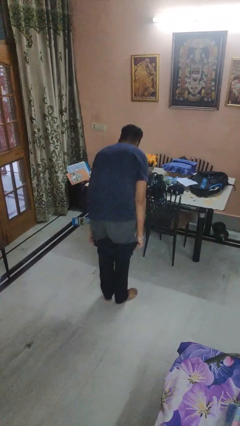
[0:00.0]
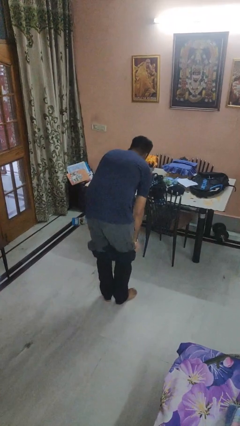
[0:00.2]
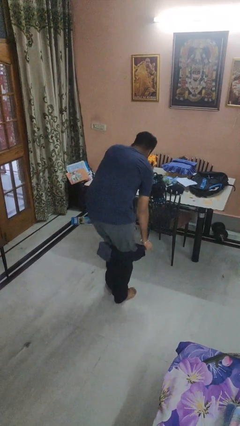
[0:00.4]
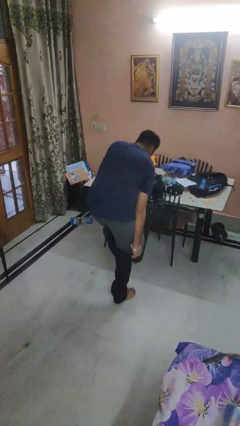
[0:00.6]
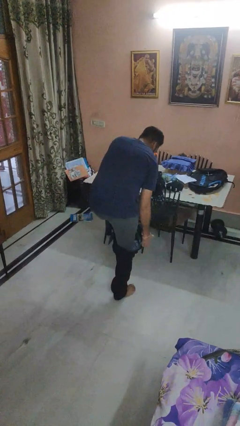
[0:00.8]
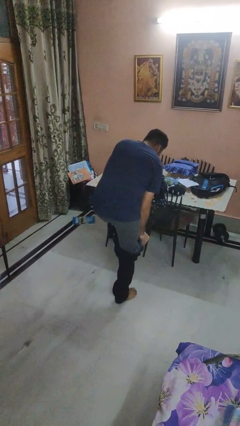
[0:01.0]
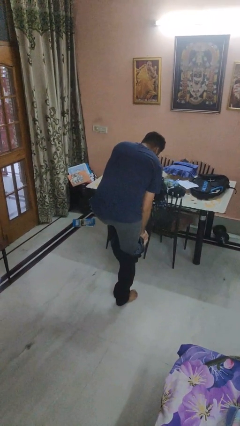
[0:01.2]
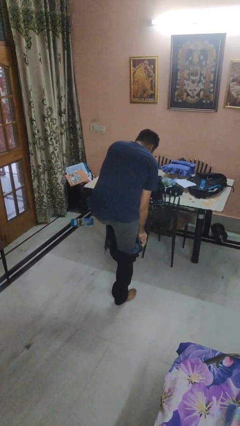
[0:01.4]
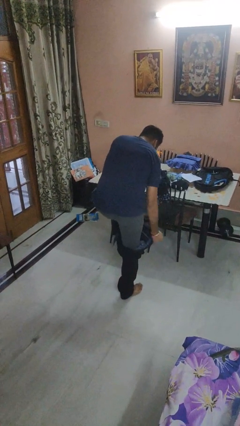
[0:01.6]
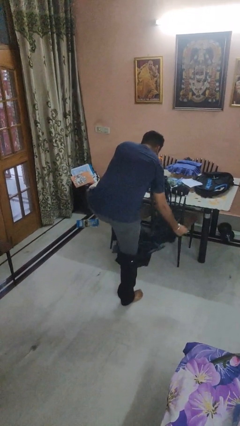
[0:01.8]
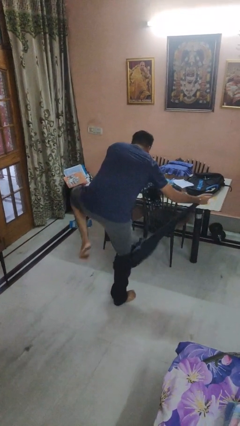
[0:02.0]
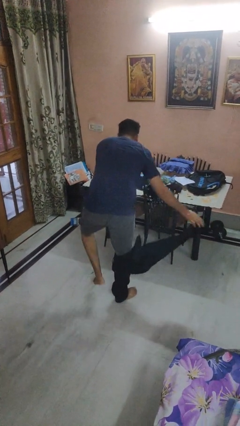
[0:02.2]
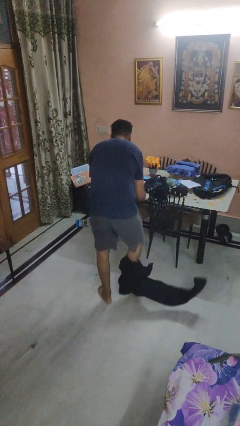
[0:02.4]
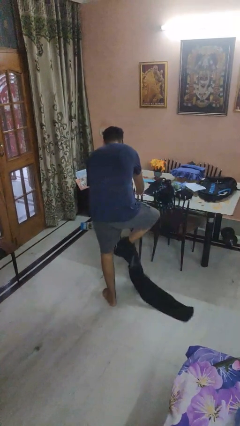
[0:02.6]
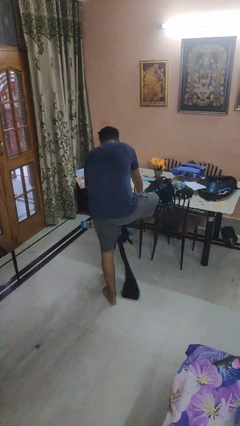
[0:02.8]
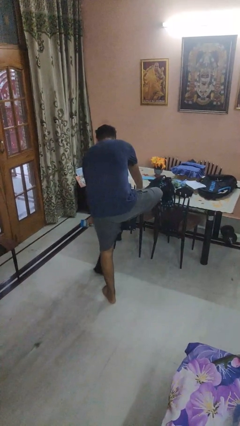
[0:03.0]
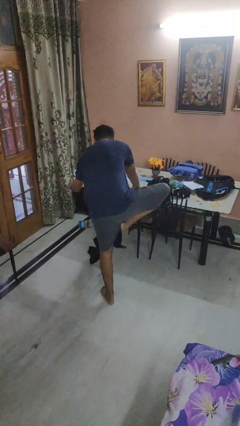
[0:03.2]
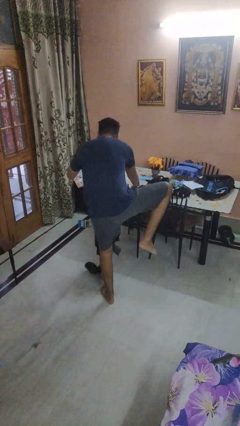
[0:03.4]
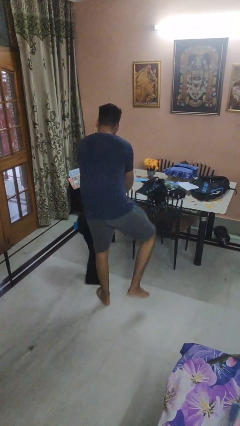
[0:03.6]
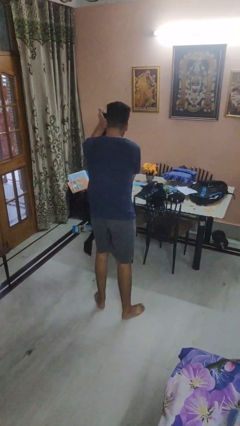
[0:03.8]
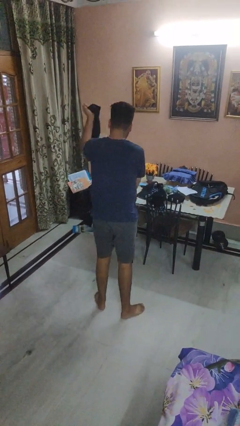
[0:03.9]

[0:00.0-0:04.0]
person takes off pants

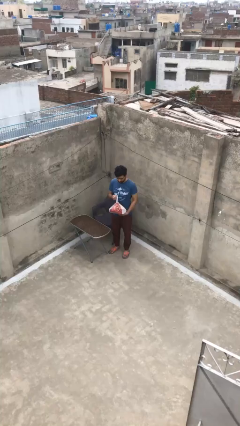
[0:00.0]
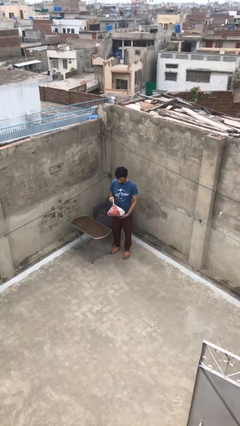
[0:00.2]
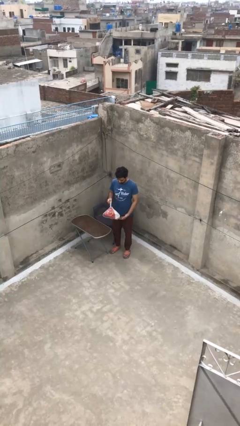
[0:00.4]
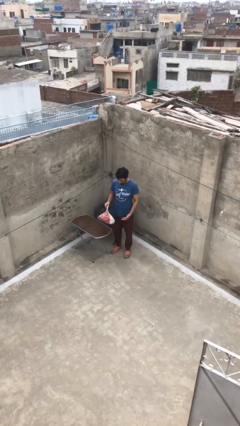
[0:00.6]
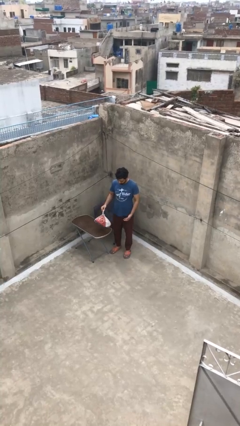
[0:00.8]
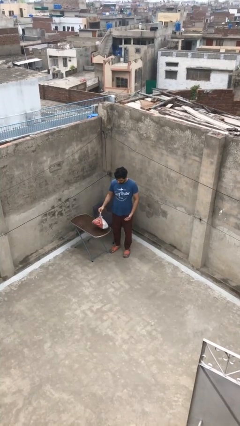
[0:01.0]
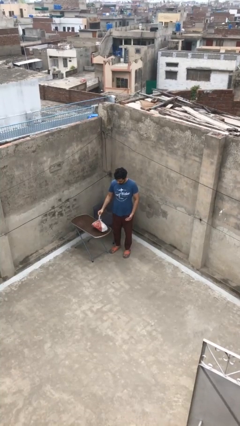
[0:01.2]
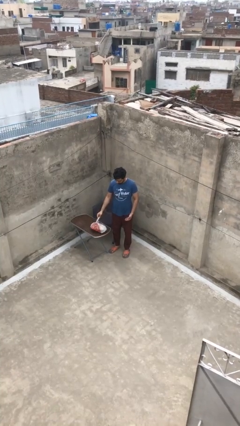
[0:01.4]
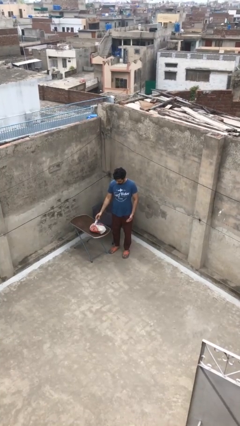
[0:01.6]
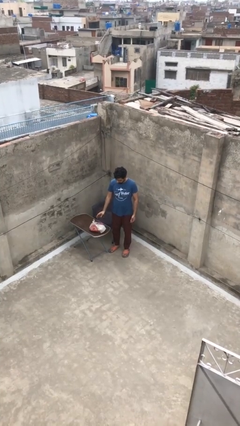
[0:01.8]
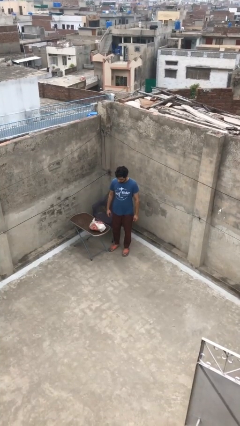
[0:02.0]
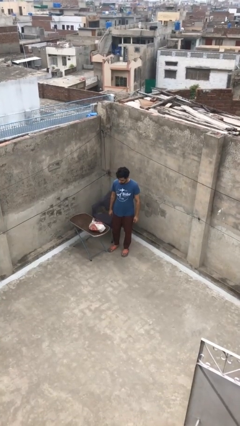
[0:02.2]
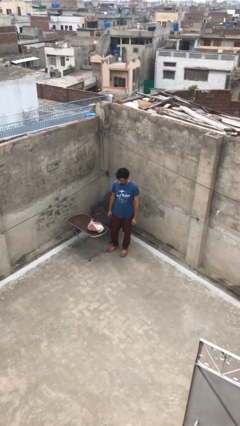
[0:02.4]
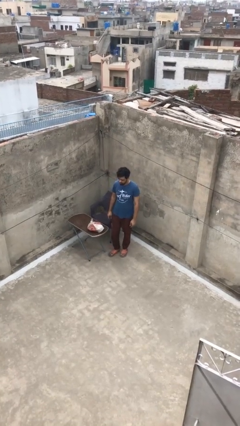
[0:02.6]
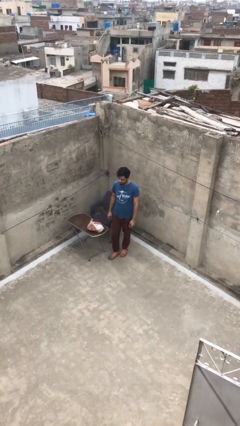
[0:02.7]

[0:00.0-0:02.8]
person puts down object on table

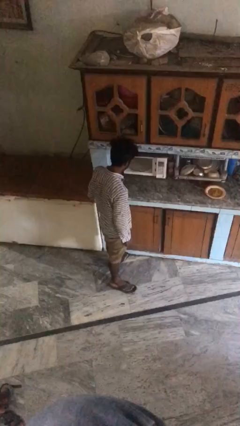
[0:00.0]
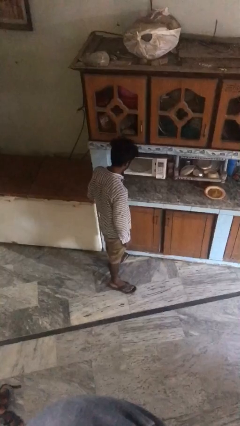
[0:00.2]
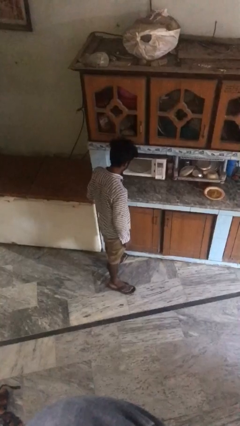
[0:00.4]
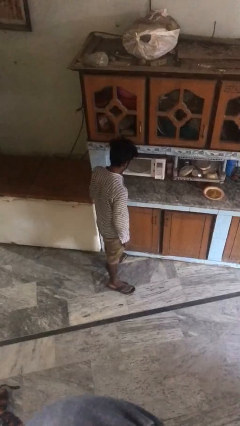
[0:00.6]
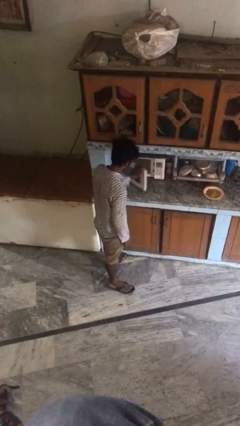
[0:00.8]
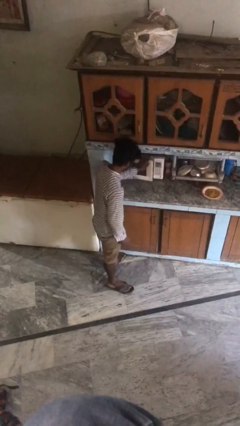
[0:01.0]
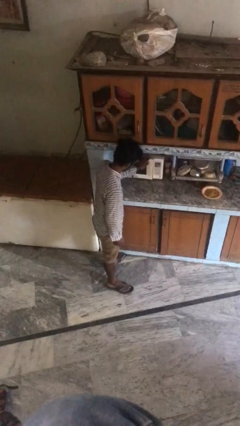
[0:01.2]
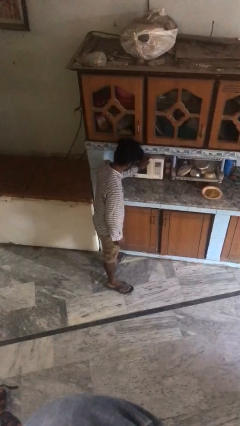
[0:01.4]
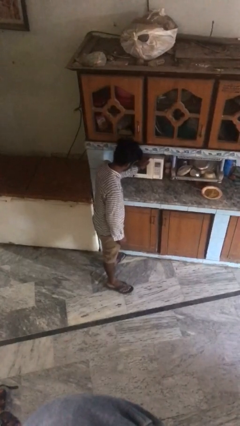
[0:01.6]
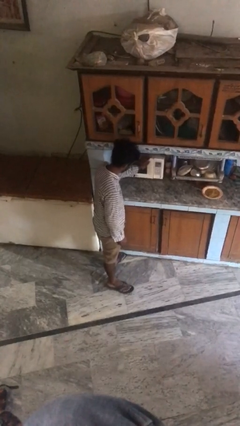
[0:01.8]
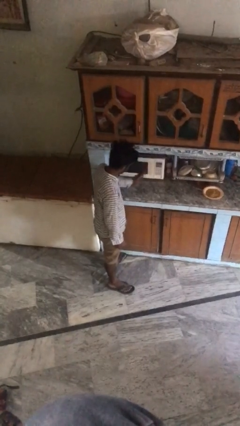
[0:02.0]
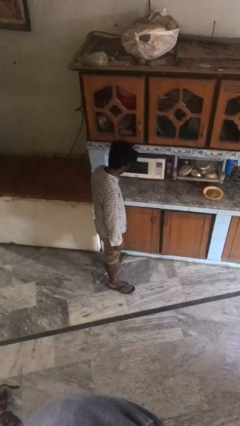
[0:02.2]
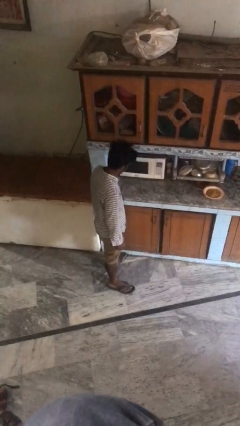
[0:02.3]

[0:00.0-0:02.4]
person closes oven door

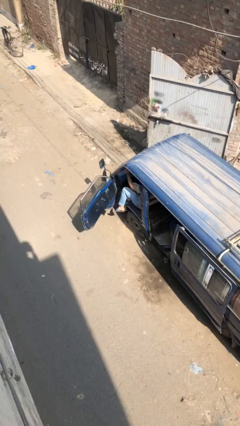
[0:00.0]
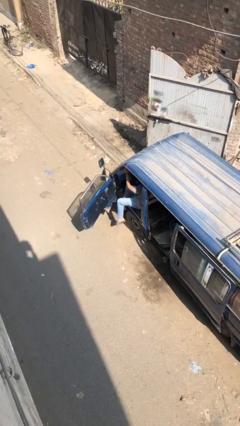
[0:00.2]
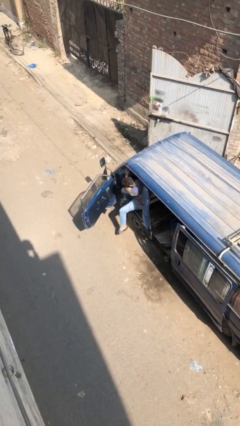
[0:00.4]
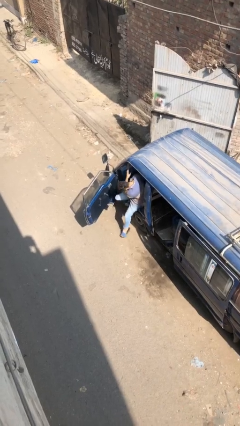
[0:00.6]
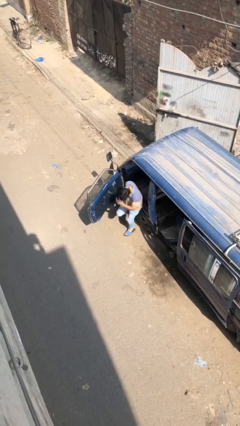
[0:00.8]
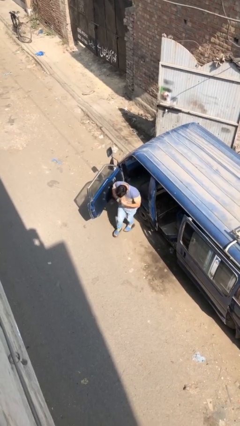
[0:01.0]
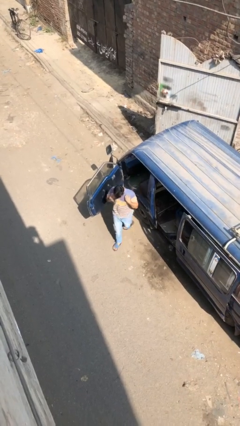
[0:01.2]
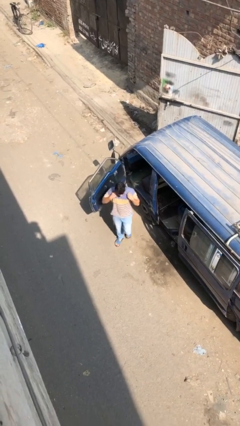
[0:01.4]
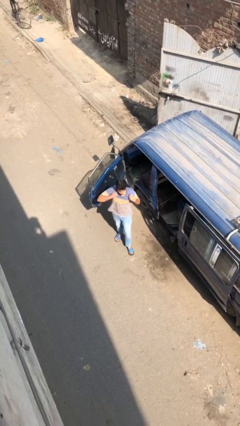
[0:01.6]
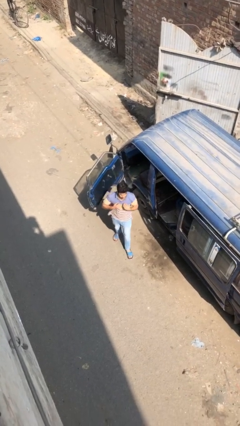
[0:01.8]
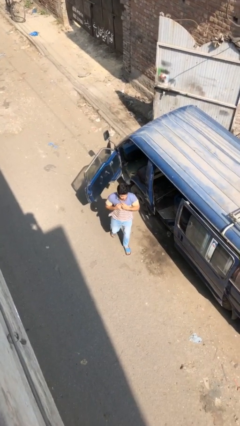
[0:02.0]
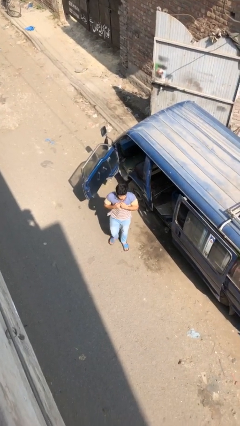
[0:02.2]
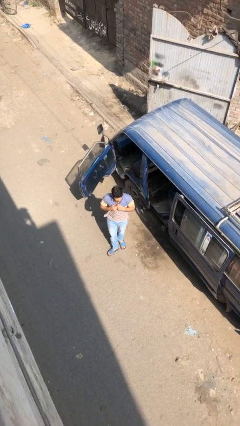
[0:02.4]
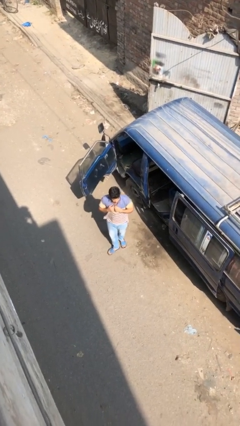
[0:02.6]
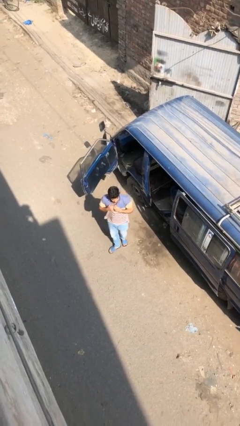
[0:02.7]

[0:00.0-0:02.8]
person exits car

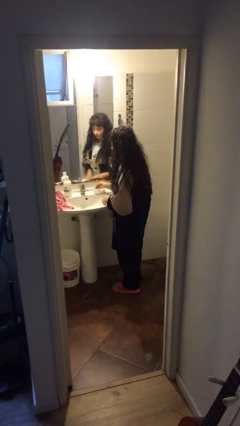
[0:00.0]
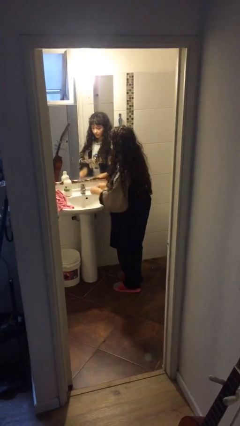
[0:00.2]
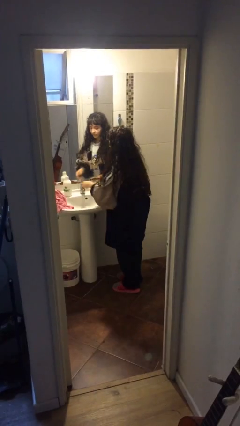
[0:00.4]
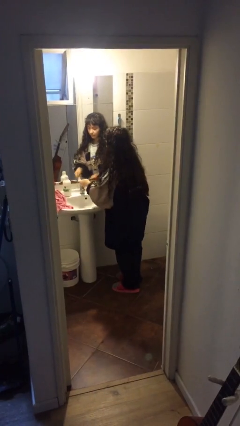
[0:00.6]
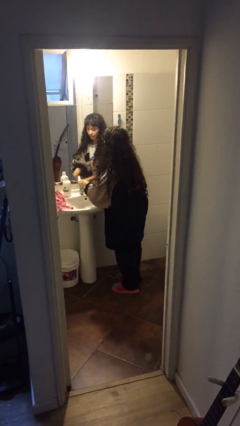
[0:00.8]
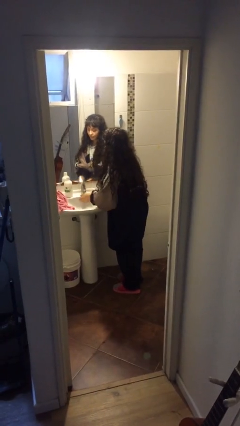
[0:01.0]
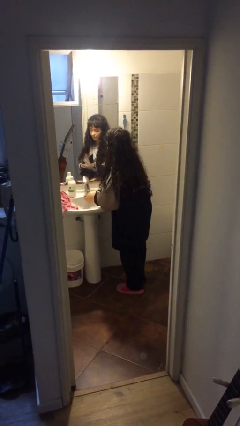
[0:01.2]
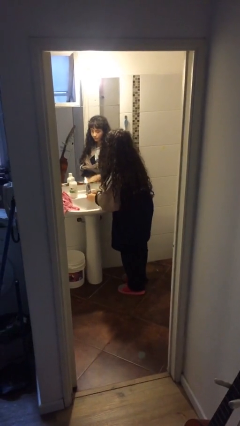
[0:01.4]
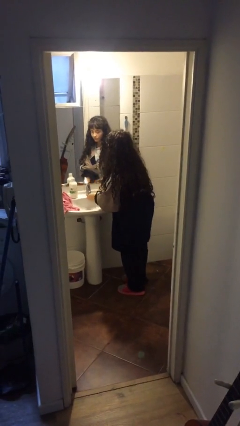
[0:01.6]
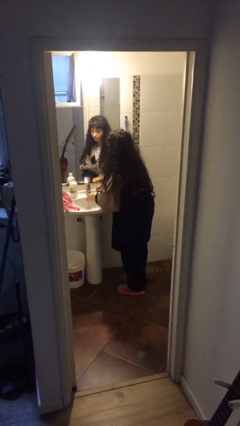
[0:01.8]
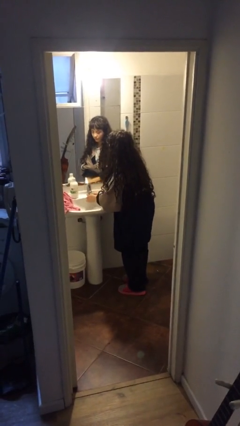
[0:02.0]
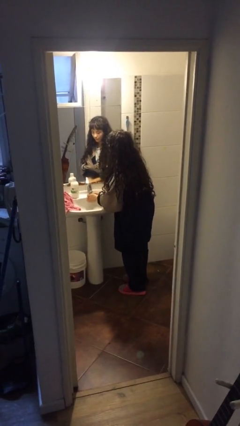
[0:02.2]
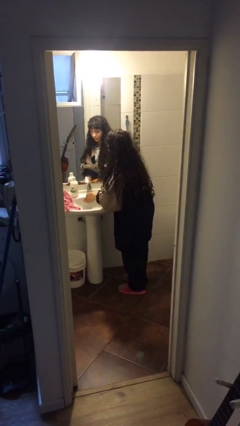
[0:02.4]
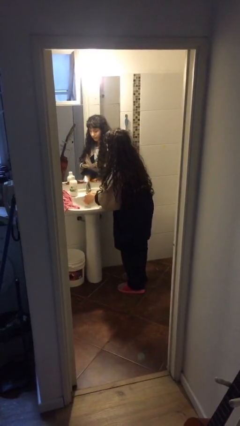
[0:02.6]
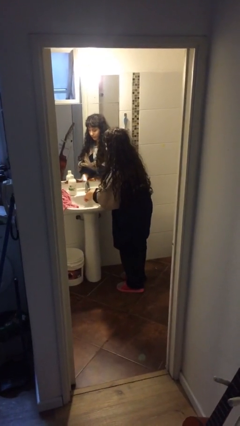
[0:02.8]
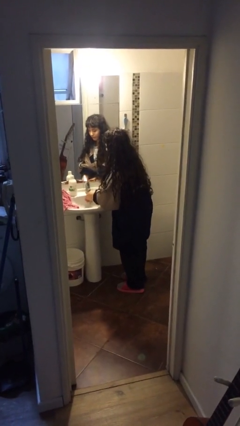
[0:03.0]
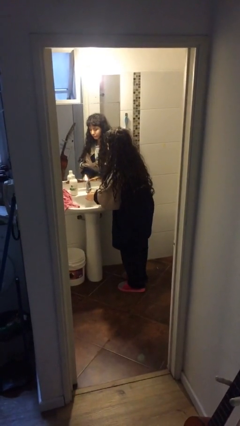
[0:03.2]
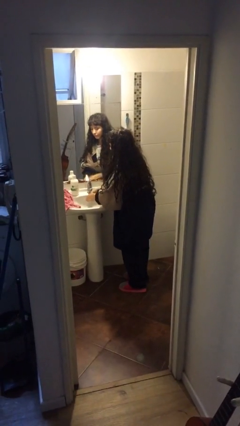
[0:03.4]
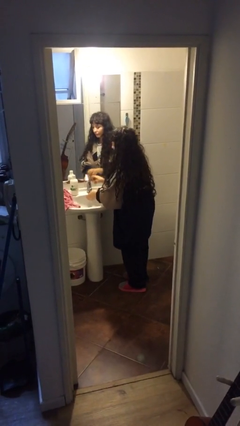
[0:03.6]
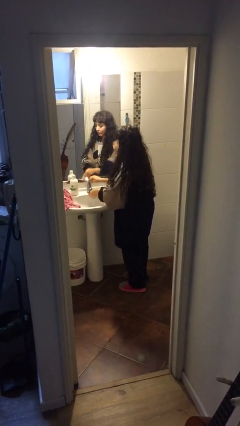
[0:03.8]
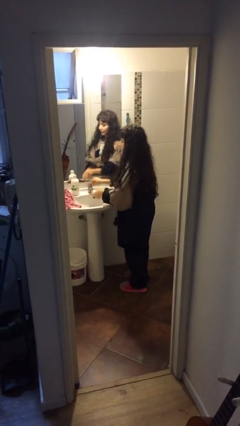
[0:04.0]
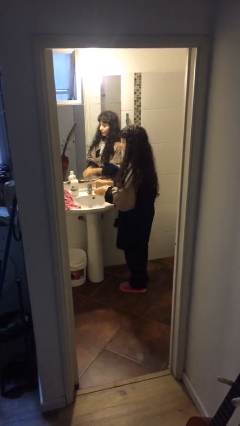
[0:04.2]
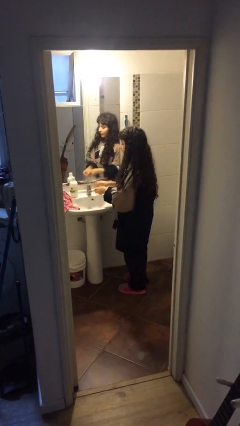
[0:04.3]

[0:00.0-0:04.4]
person washes hands

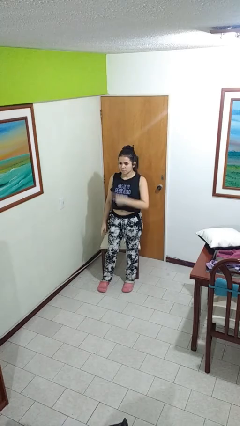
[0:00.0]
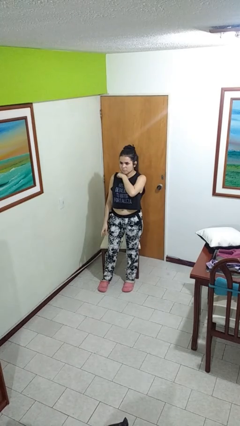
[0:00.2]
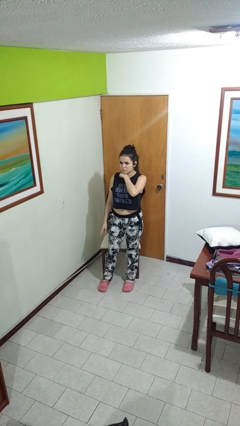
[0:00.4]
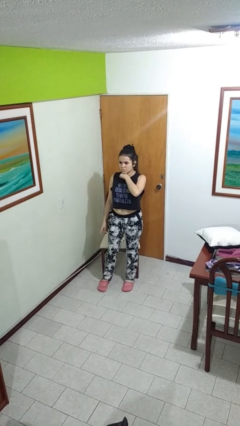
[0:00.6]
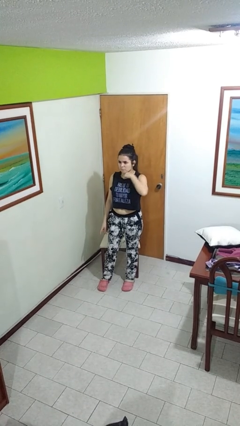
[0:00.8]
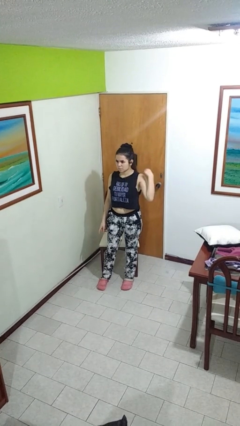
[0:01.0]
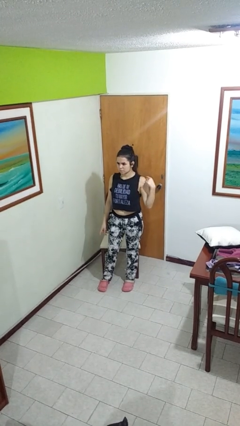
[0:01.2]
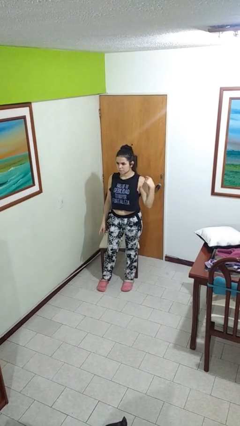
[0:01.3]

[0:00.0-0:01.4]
person gestures cut
